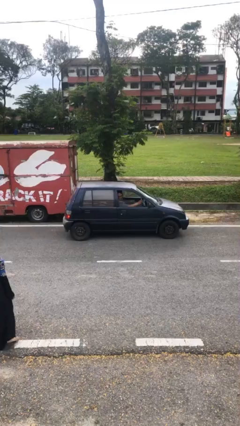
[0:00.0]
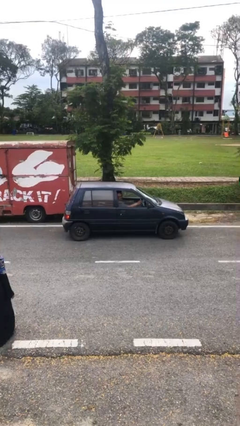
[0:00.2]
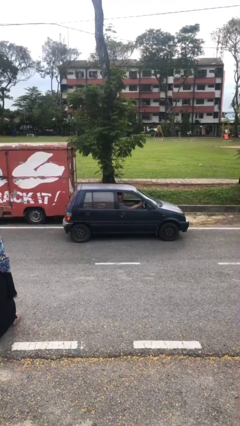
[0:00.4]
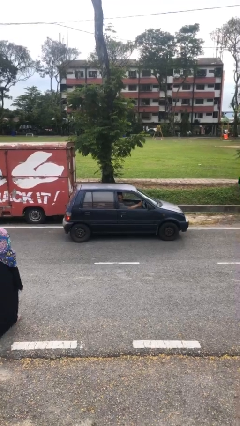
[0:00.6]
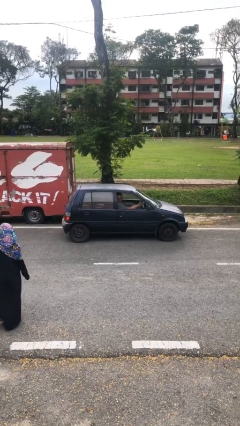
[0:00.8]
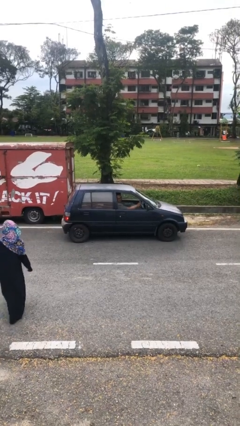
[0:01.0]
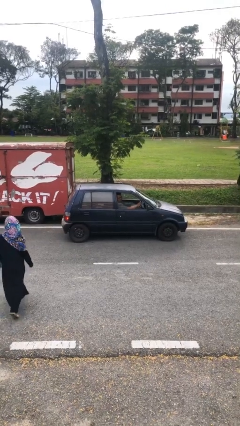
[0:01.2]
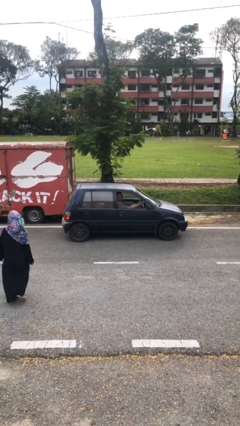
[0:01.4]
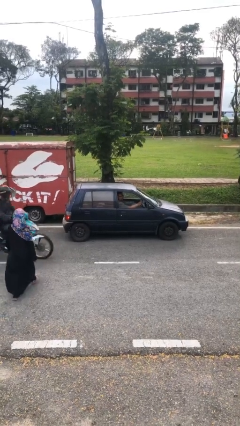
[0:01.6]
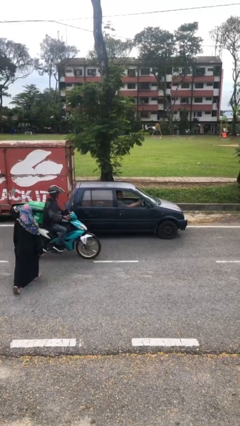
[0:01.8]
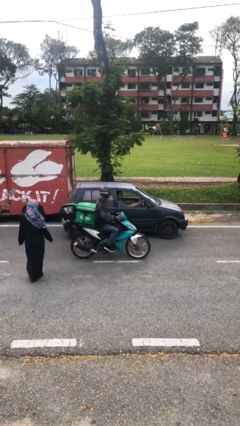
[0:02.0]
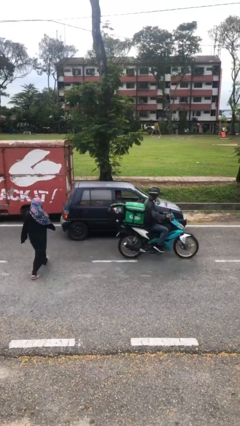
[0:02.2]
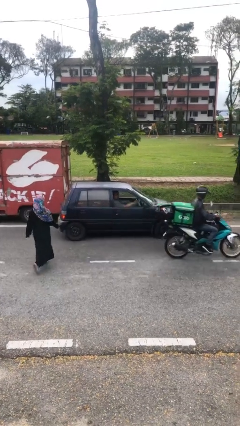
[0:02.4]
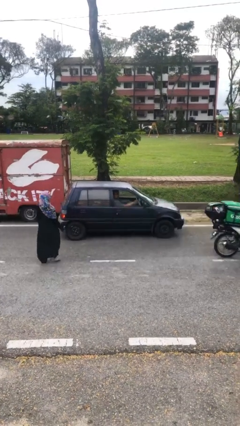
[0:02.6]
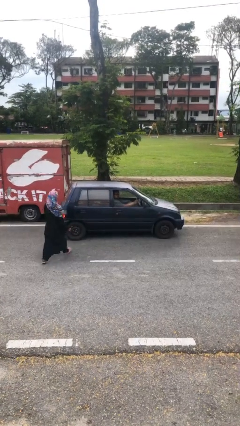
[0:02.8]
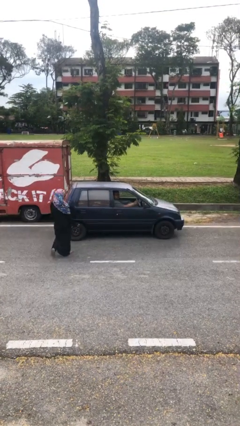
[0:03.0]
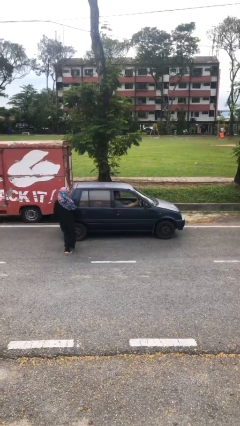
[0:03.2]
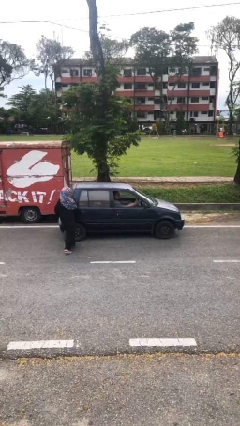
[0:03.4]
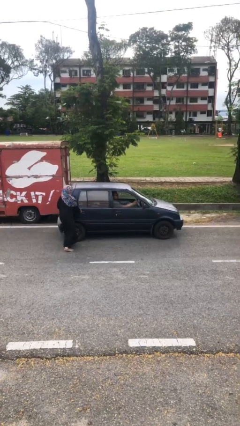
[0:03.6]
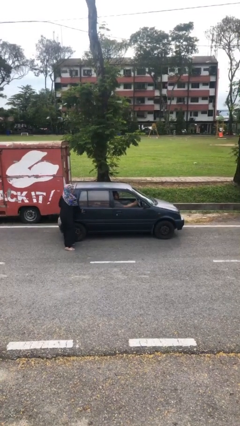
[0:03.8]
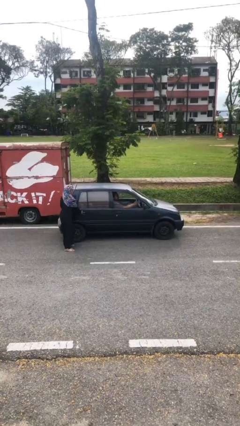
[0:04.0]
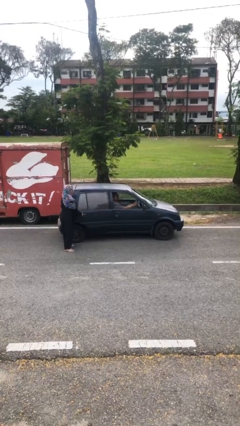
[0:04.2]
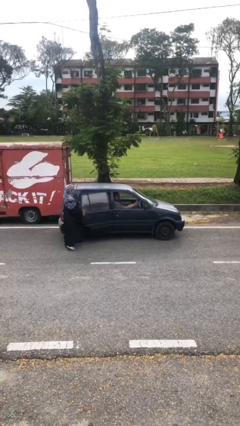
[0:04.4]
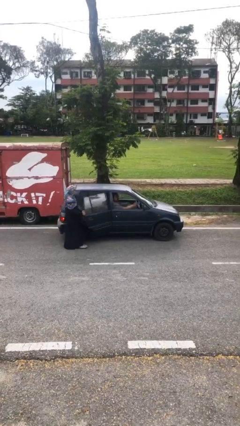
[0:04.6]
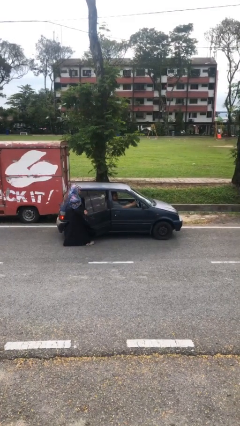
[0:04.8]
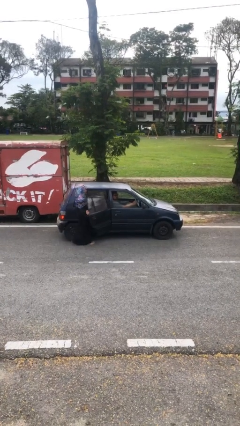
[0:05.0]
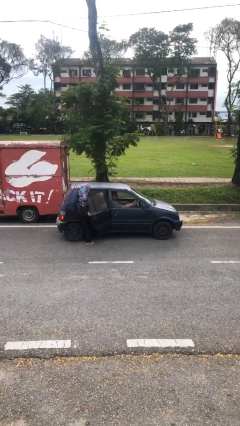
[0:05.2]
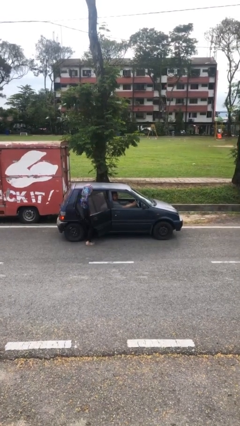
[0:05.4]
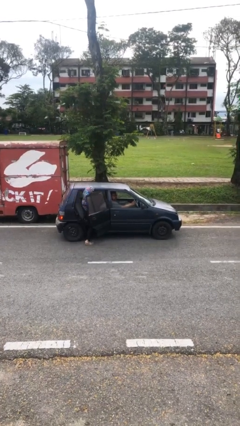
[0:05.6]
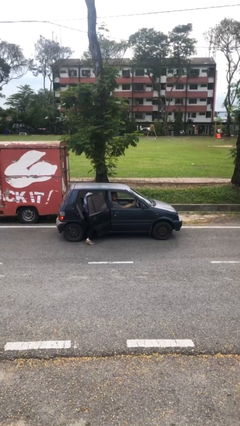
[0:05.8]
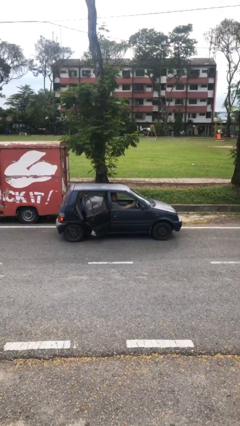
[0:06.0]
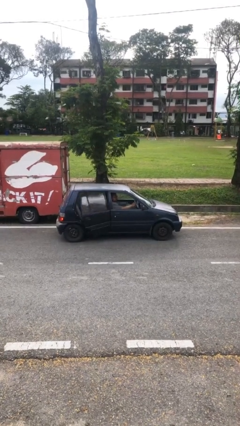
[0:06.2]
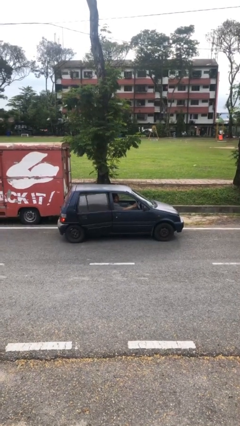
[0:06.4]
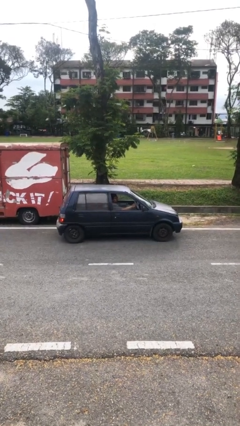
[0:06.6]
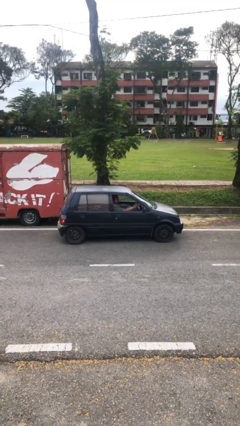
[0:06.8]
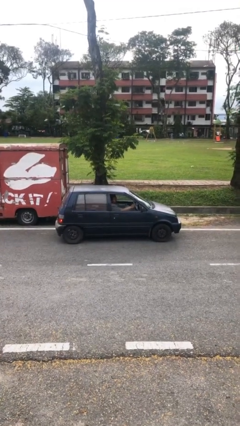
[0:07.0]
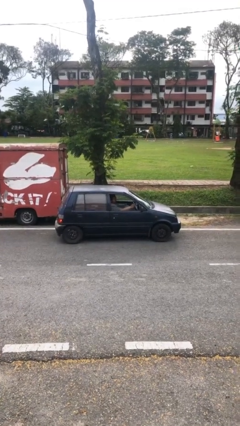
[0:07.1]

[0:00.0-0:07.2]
car picks up person
